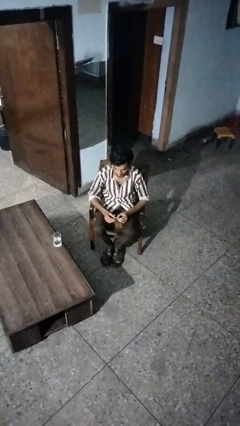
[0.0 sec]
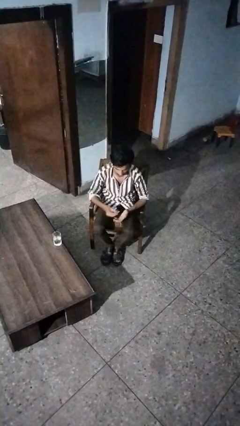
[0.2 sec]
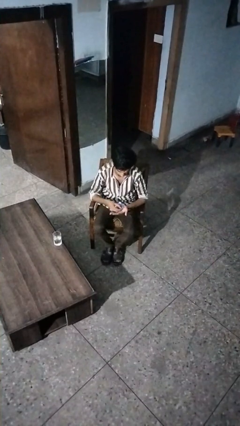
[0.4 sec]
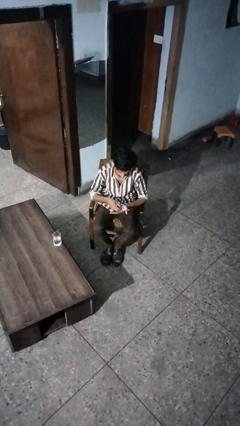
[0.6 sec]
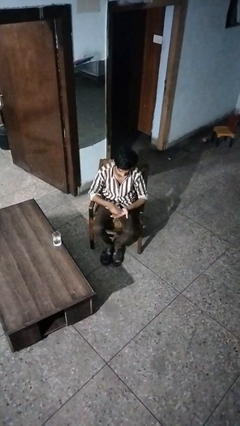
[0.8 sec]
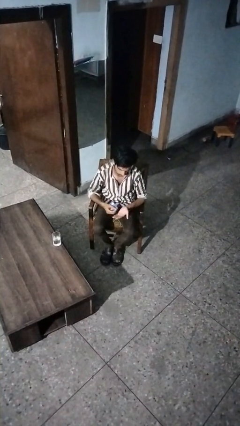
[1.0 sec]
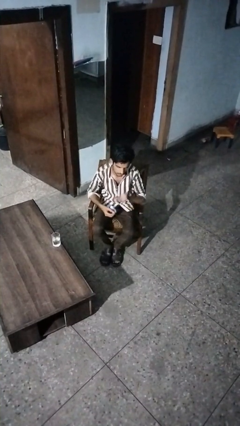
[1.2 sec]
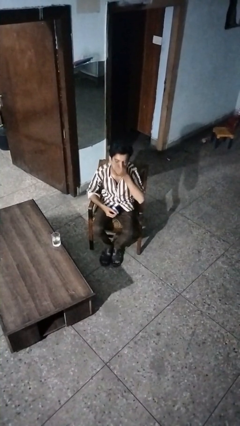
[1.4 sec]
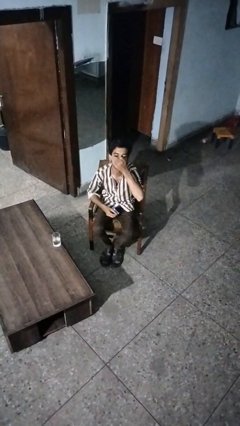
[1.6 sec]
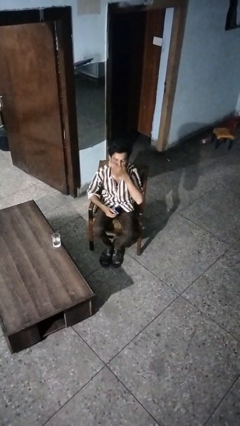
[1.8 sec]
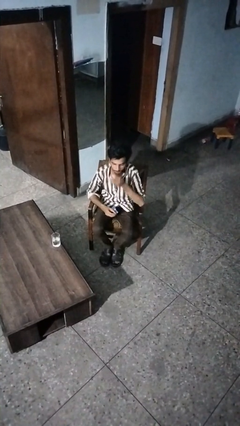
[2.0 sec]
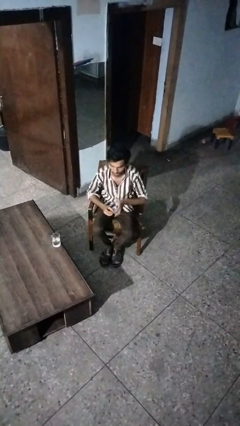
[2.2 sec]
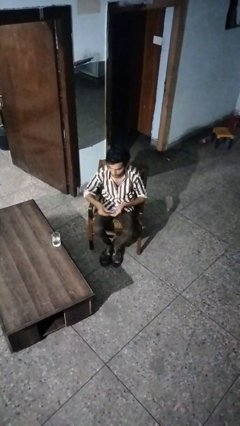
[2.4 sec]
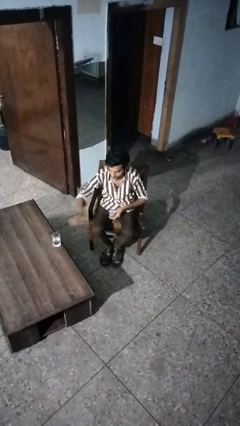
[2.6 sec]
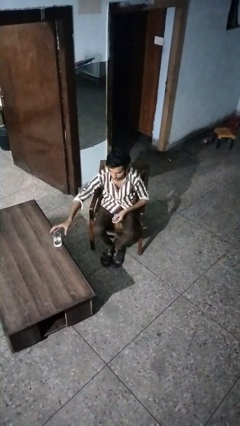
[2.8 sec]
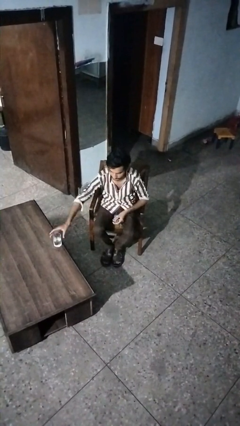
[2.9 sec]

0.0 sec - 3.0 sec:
person takes medicine pills

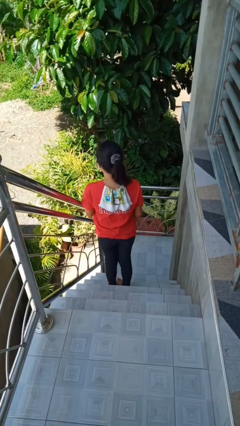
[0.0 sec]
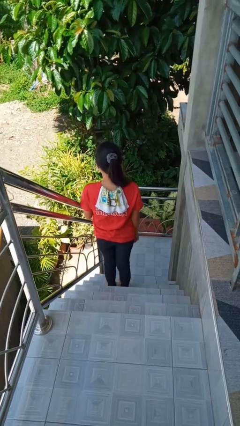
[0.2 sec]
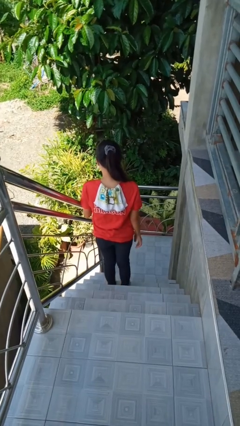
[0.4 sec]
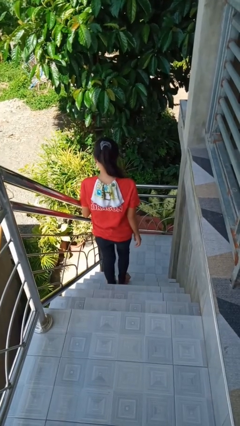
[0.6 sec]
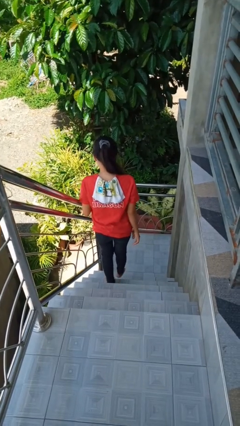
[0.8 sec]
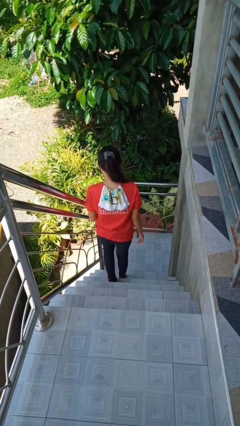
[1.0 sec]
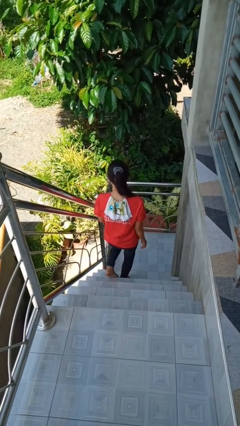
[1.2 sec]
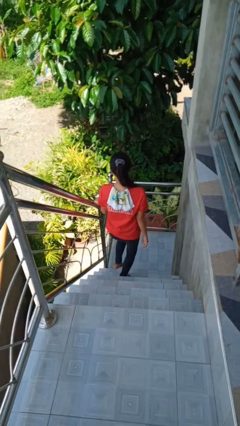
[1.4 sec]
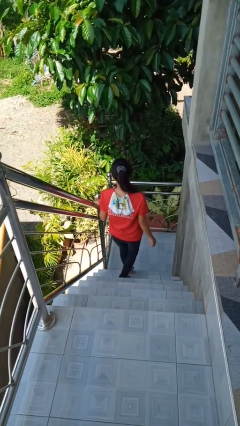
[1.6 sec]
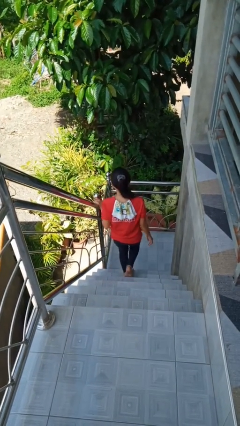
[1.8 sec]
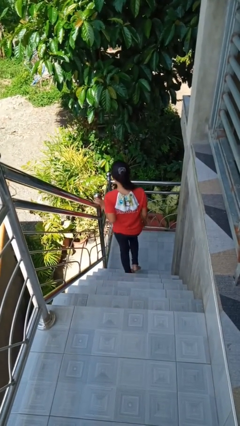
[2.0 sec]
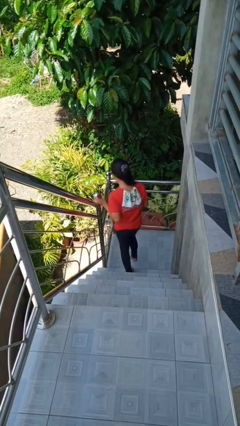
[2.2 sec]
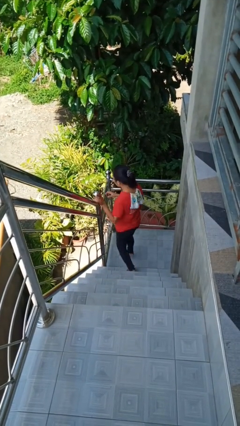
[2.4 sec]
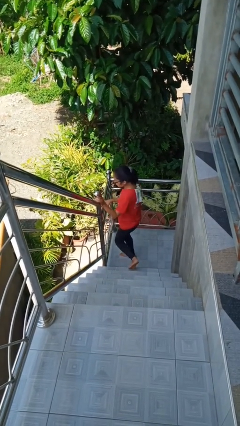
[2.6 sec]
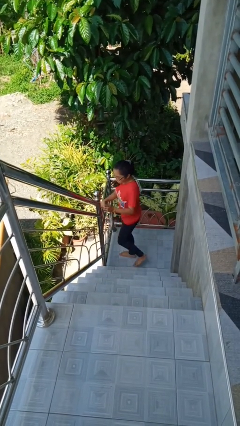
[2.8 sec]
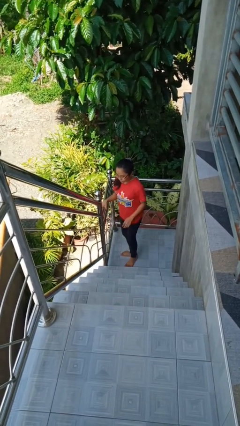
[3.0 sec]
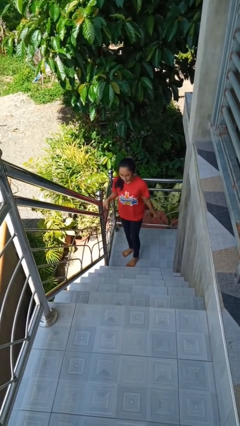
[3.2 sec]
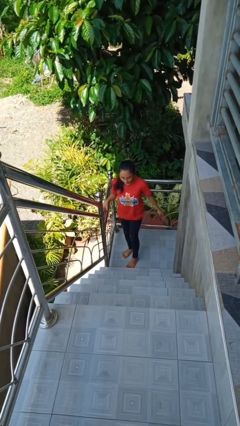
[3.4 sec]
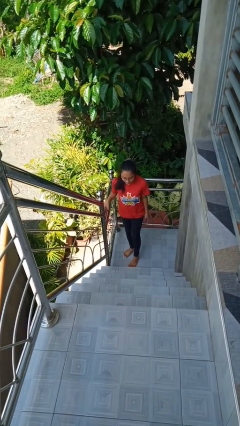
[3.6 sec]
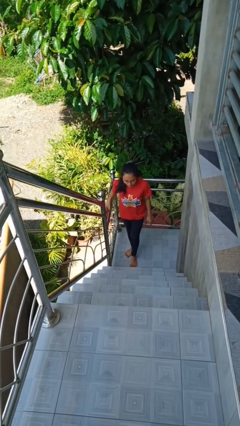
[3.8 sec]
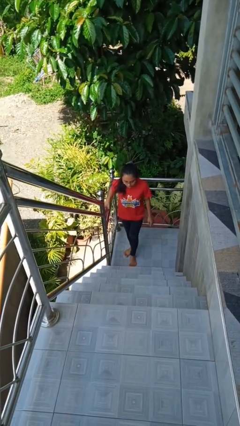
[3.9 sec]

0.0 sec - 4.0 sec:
person climbs down stairs

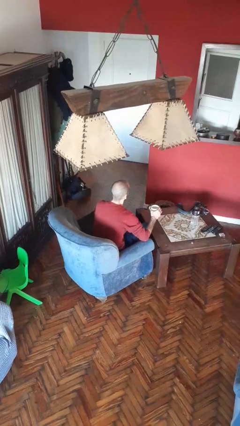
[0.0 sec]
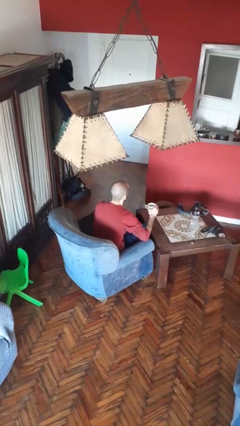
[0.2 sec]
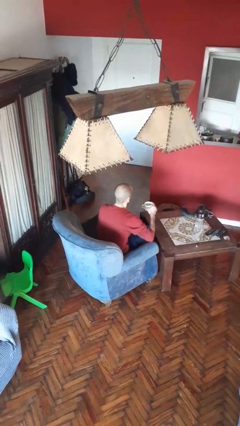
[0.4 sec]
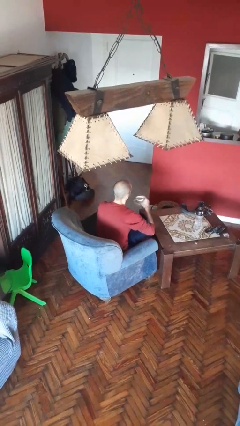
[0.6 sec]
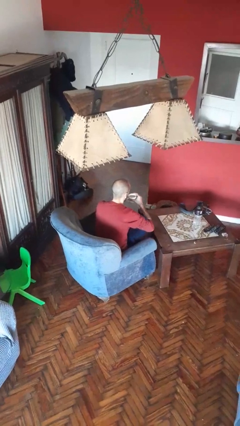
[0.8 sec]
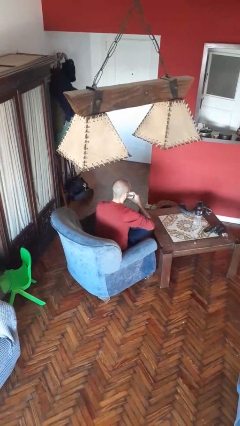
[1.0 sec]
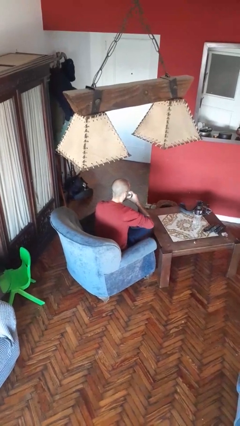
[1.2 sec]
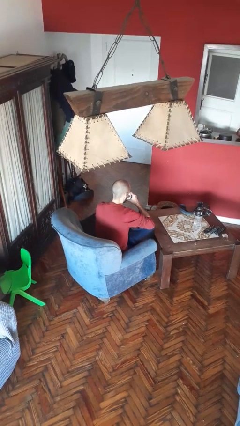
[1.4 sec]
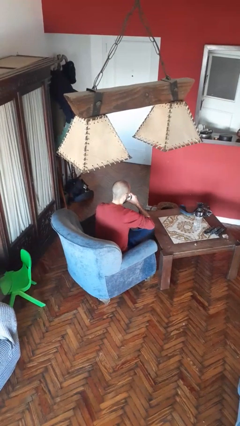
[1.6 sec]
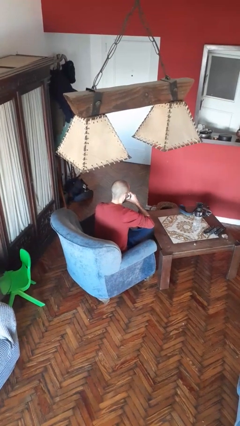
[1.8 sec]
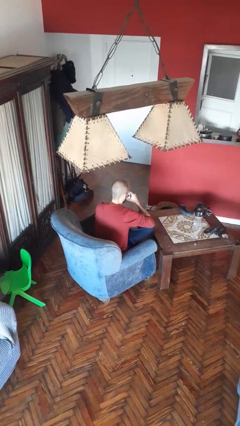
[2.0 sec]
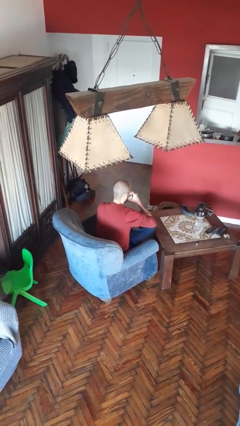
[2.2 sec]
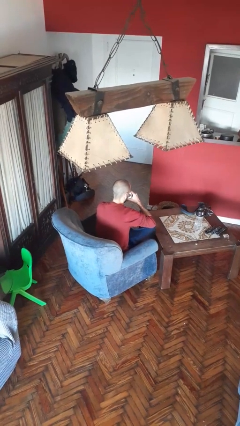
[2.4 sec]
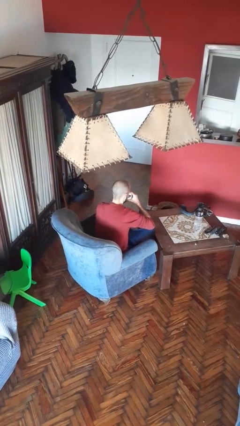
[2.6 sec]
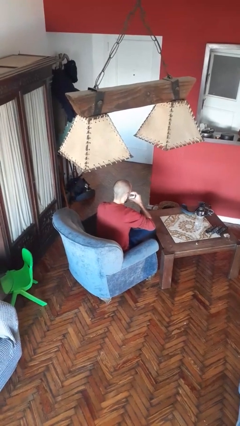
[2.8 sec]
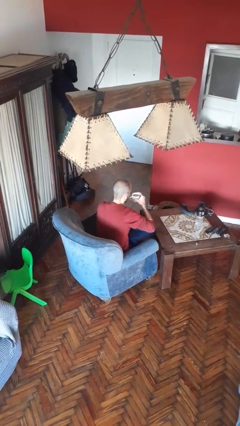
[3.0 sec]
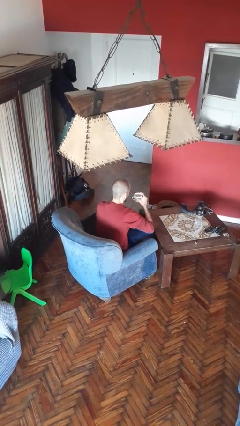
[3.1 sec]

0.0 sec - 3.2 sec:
person drinks from mug

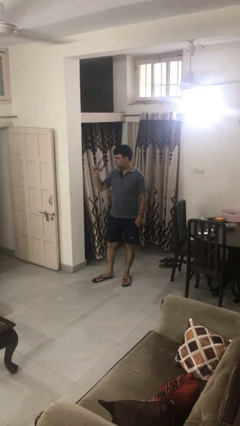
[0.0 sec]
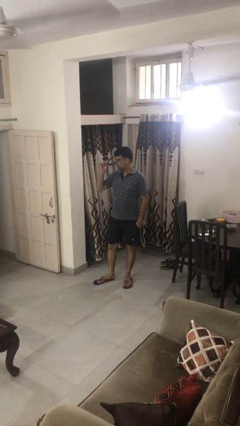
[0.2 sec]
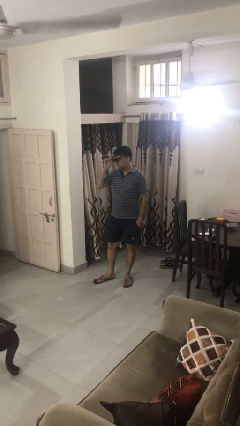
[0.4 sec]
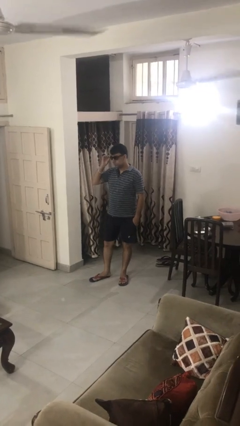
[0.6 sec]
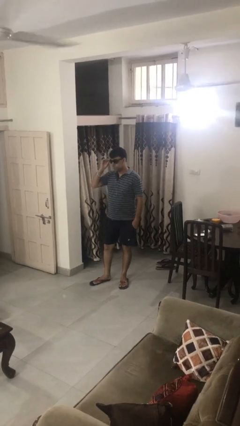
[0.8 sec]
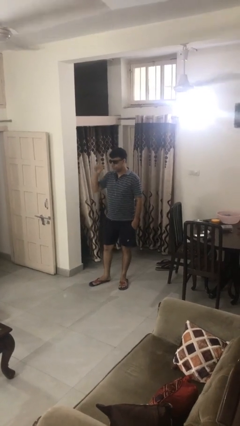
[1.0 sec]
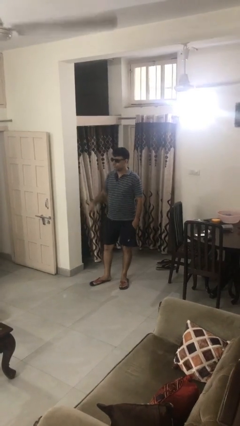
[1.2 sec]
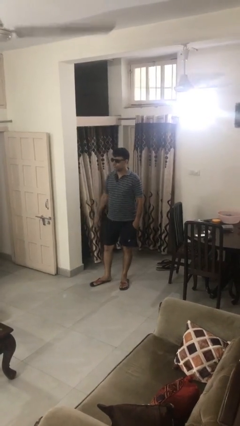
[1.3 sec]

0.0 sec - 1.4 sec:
person puts on sunglasses

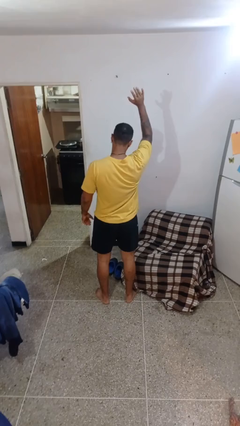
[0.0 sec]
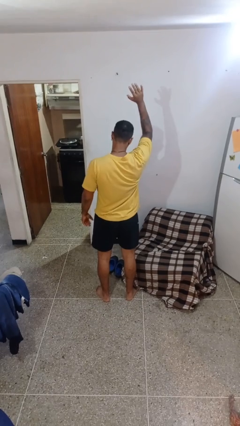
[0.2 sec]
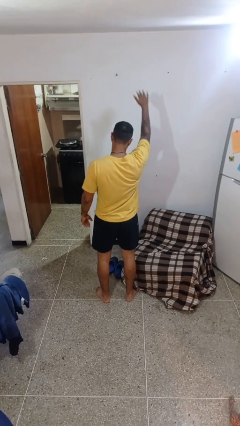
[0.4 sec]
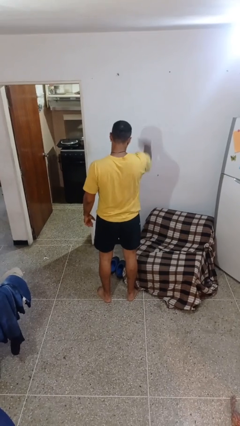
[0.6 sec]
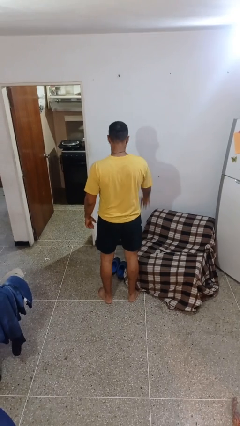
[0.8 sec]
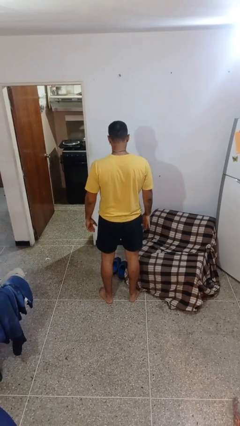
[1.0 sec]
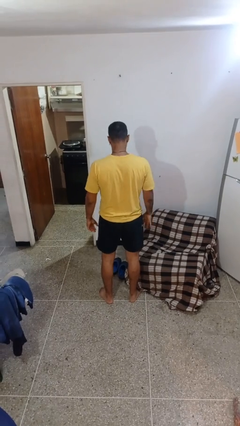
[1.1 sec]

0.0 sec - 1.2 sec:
person gestures swipe down

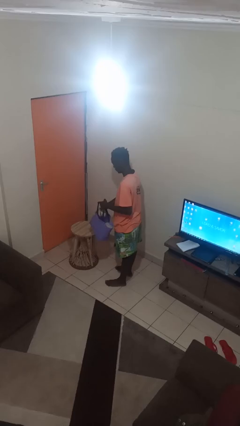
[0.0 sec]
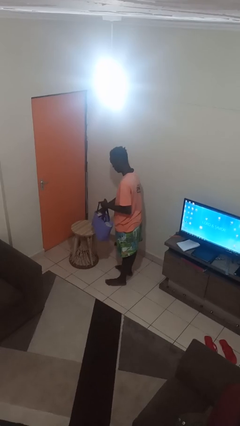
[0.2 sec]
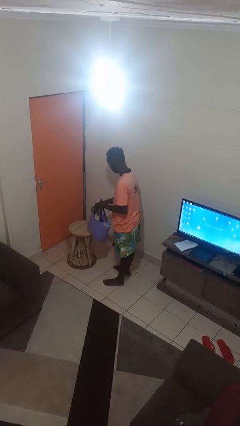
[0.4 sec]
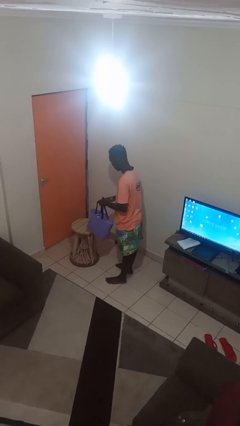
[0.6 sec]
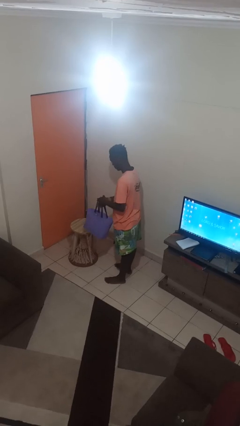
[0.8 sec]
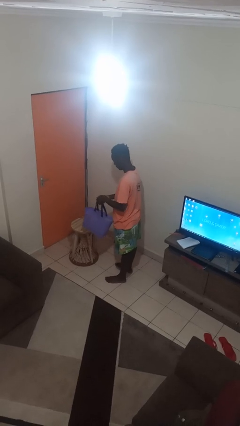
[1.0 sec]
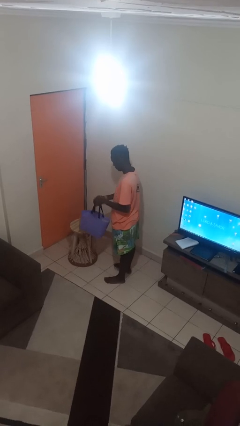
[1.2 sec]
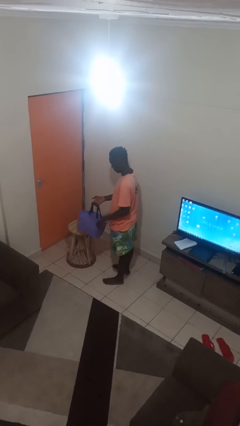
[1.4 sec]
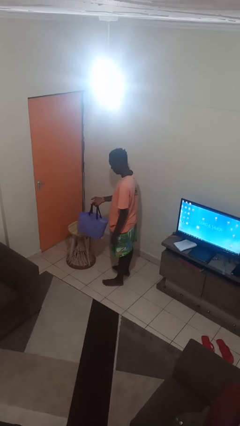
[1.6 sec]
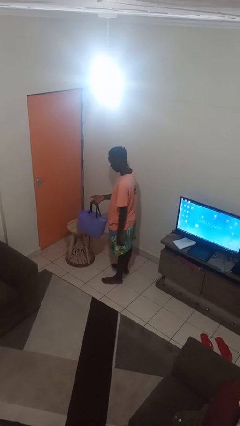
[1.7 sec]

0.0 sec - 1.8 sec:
person puts object into bag

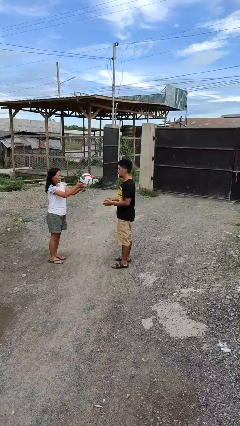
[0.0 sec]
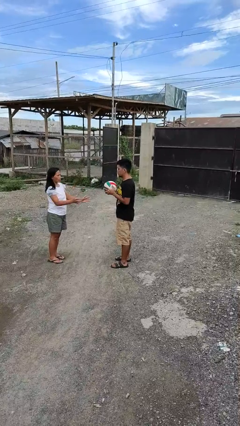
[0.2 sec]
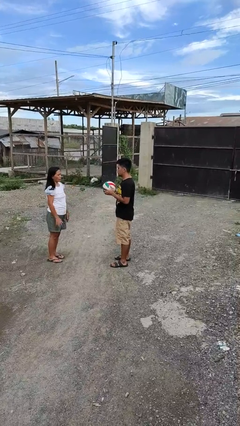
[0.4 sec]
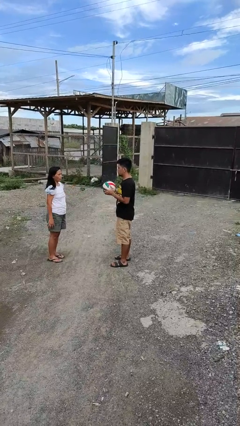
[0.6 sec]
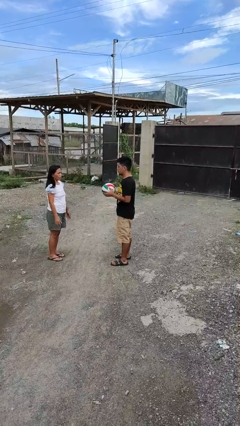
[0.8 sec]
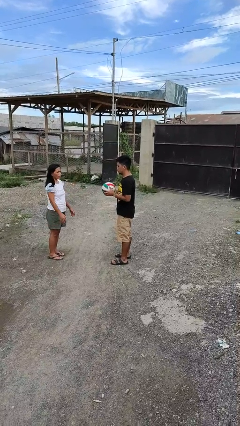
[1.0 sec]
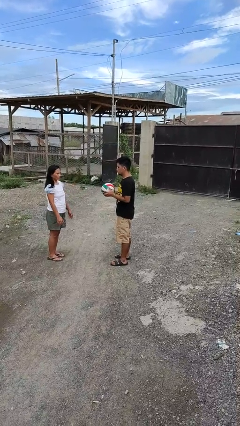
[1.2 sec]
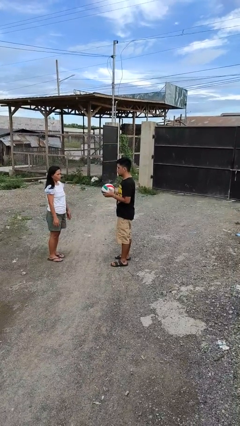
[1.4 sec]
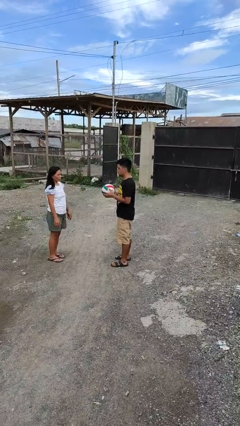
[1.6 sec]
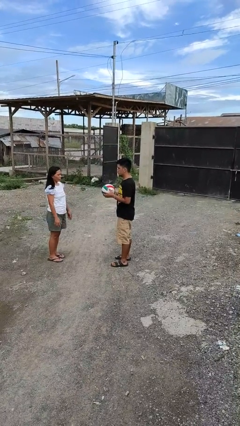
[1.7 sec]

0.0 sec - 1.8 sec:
person catches object from person

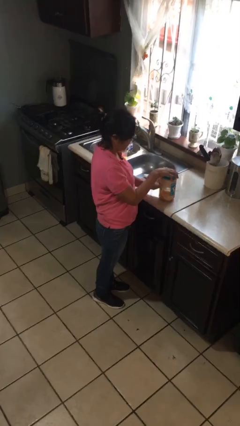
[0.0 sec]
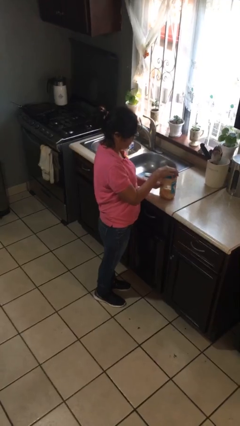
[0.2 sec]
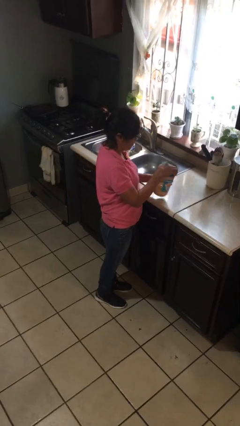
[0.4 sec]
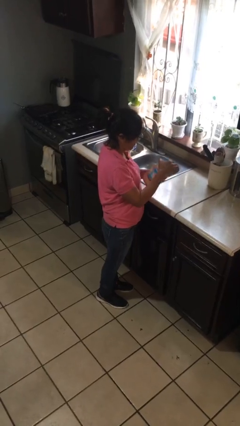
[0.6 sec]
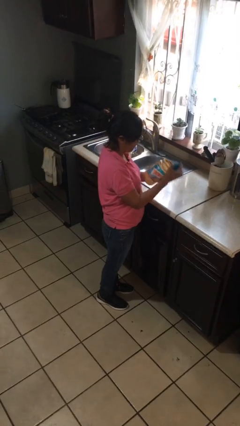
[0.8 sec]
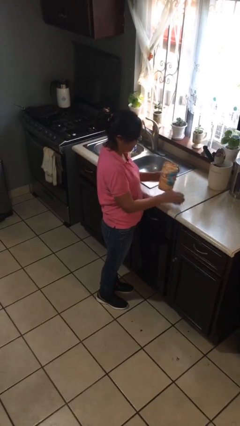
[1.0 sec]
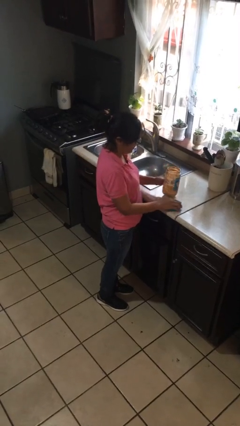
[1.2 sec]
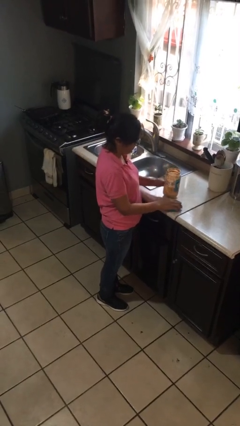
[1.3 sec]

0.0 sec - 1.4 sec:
person opens jar
